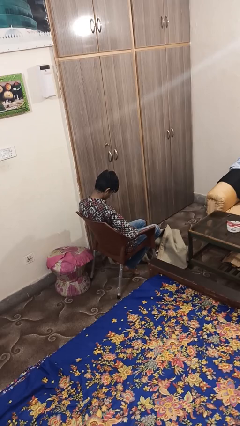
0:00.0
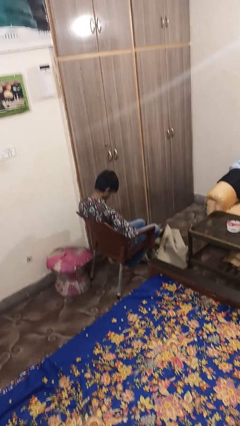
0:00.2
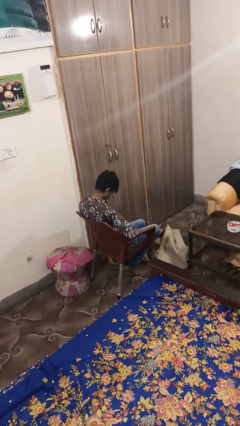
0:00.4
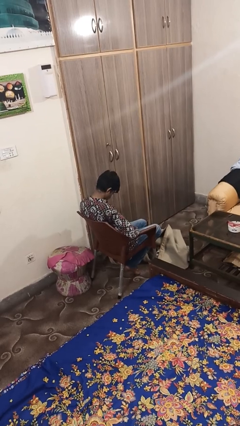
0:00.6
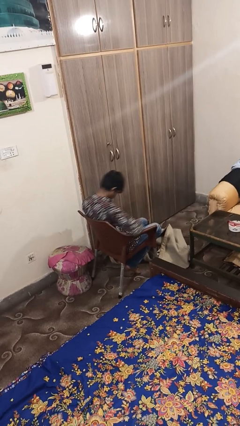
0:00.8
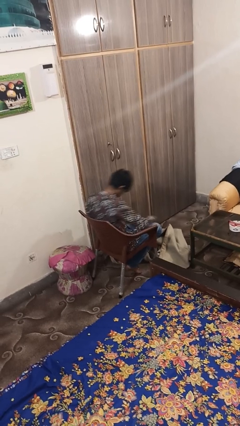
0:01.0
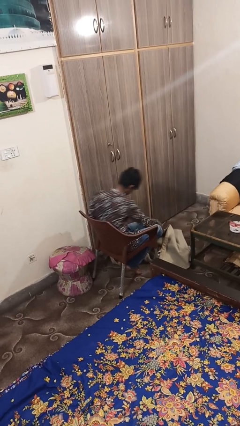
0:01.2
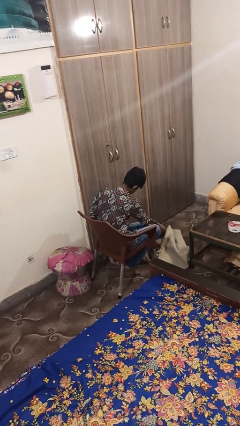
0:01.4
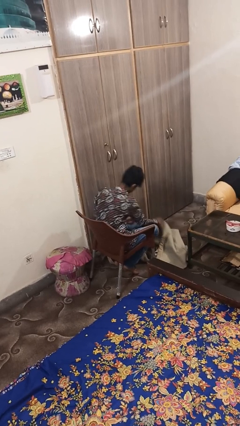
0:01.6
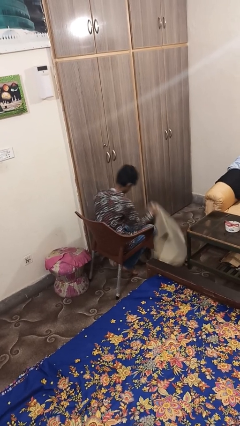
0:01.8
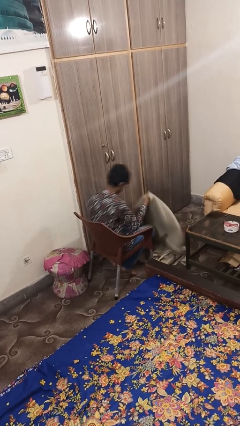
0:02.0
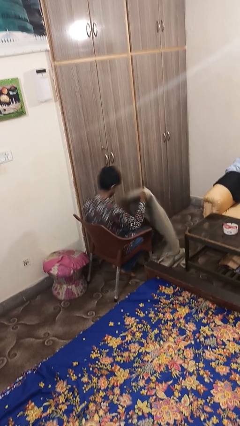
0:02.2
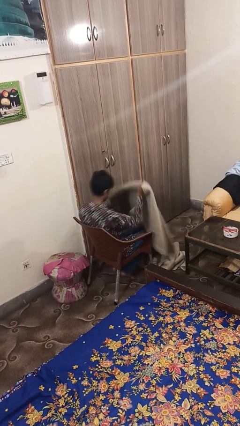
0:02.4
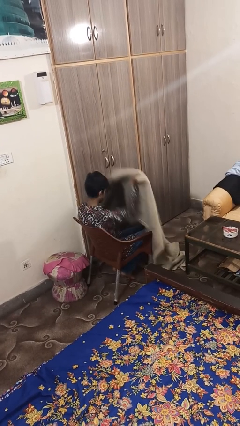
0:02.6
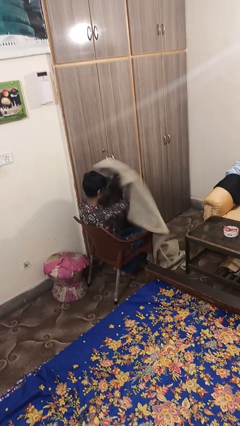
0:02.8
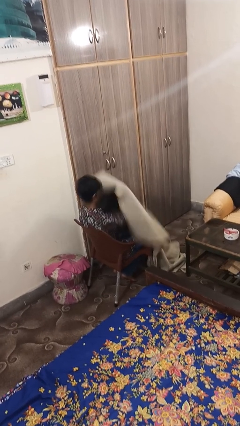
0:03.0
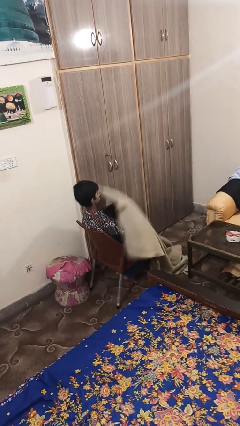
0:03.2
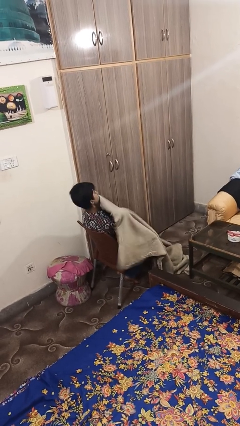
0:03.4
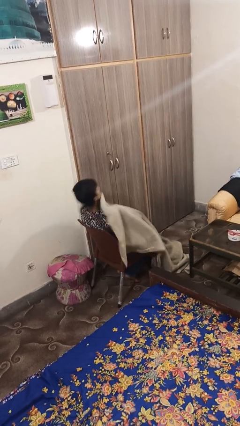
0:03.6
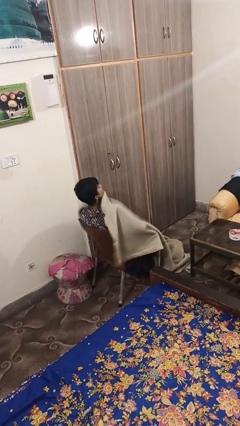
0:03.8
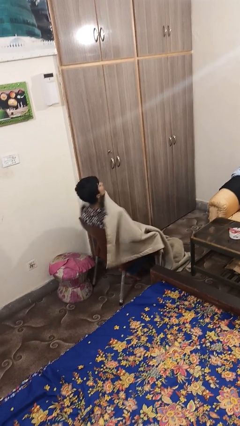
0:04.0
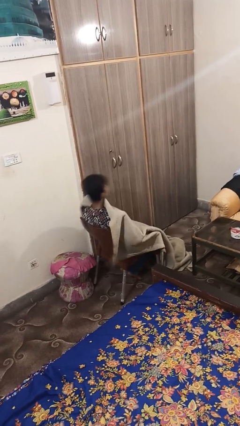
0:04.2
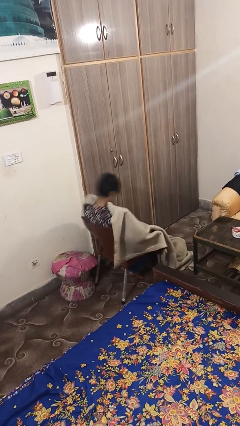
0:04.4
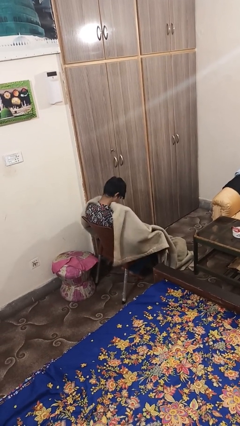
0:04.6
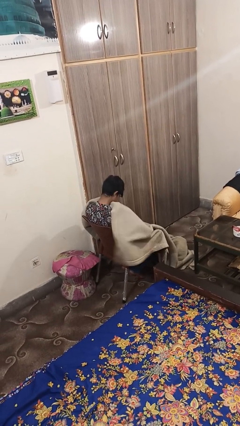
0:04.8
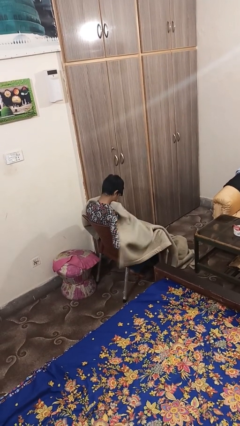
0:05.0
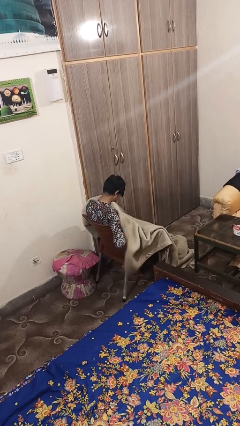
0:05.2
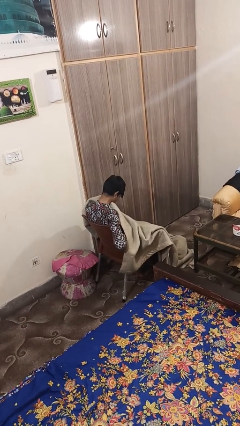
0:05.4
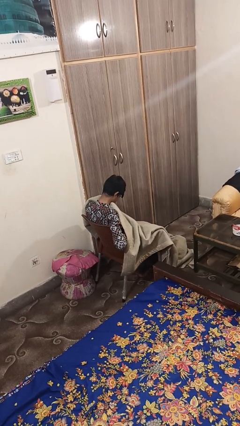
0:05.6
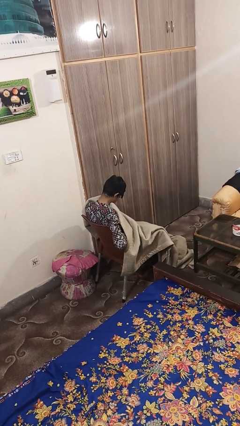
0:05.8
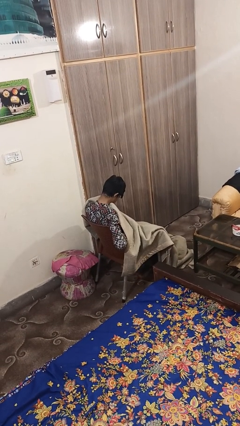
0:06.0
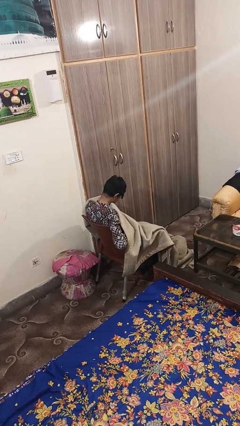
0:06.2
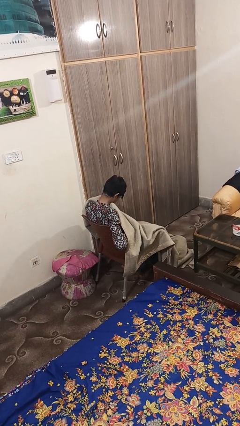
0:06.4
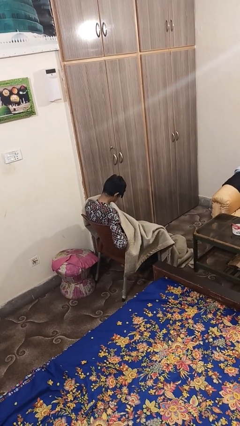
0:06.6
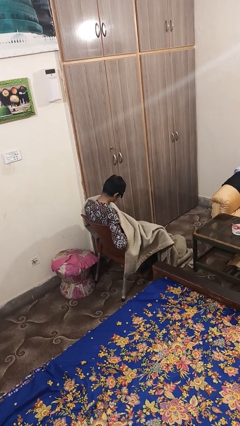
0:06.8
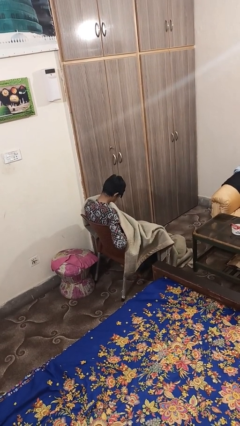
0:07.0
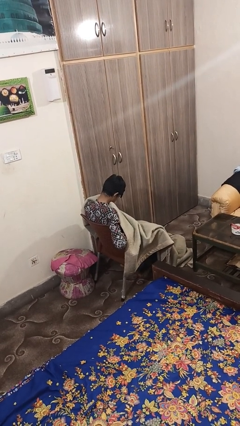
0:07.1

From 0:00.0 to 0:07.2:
person covers with blanket

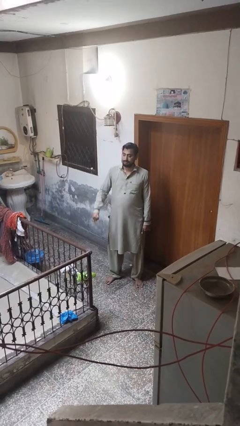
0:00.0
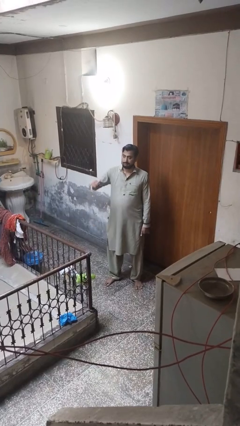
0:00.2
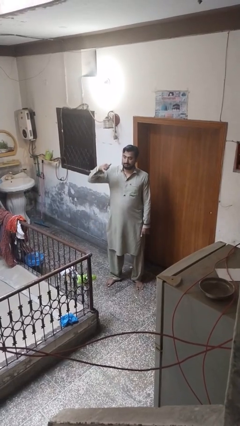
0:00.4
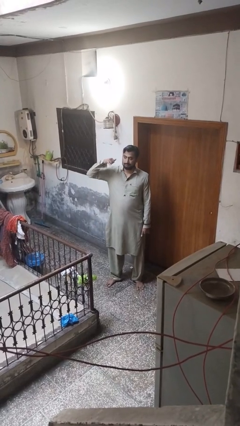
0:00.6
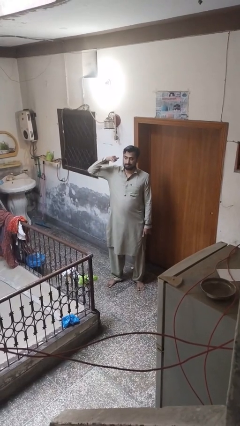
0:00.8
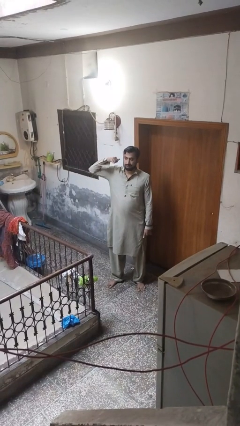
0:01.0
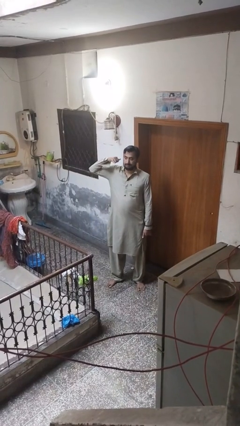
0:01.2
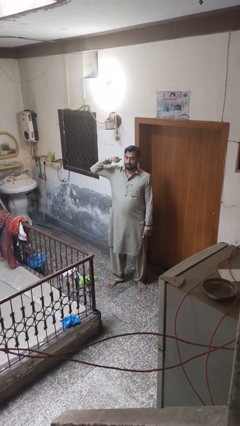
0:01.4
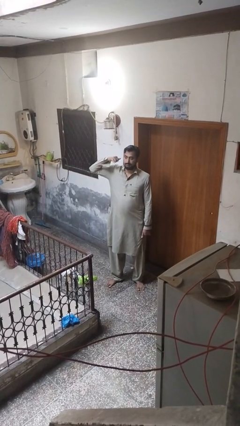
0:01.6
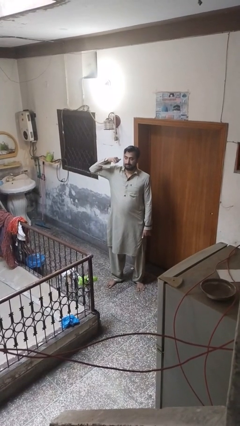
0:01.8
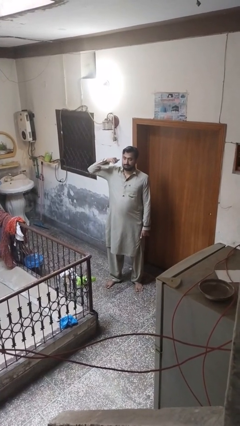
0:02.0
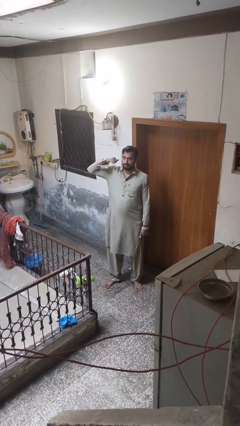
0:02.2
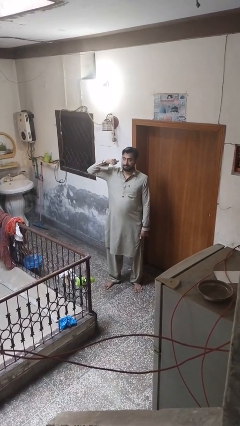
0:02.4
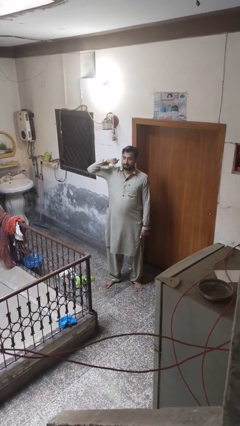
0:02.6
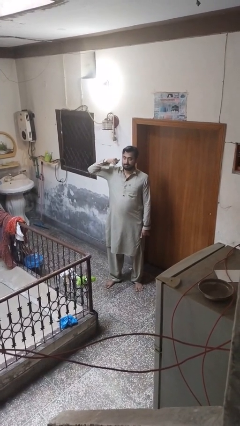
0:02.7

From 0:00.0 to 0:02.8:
person gestures call me

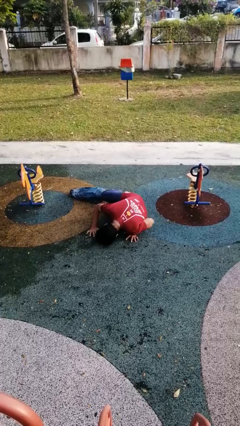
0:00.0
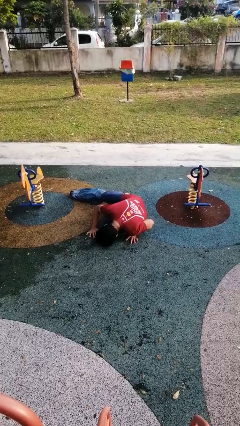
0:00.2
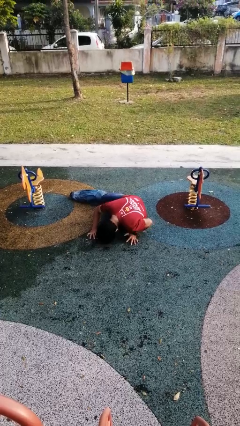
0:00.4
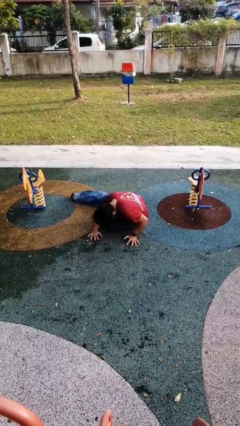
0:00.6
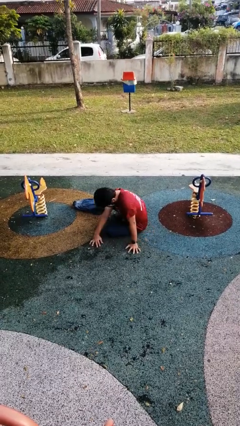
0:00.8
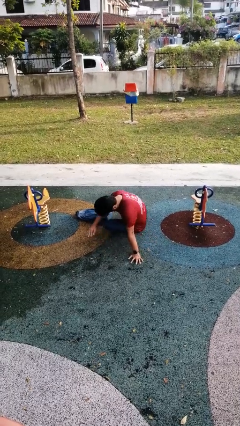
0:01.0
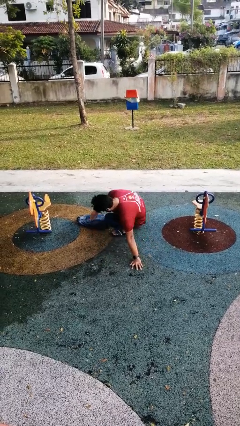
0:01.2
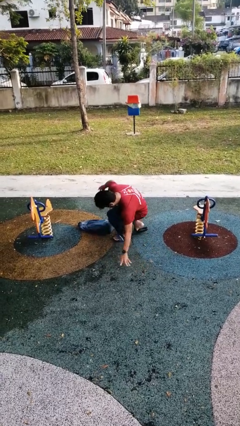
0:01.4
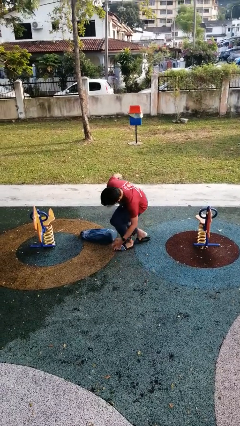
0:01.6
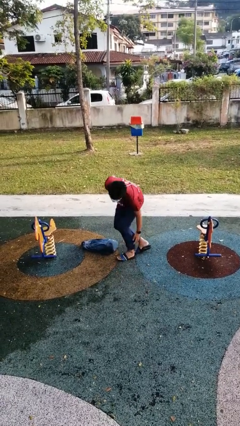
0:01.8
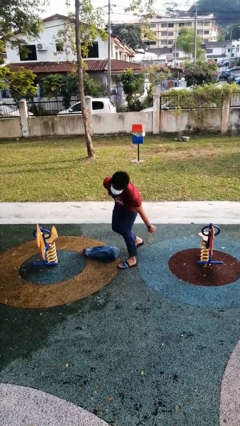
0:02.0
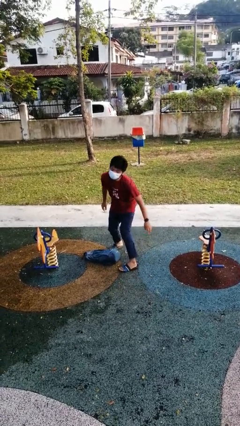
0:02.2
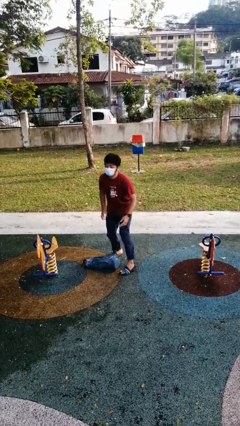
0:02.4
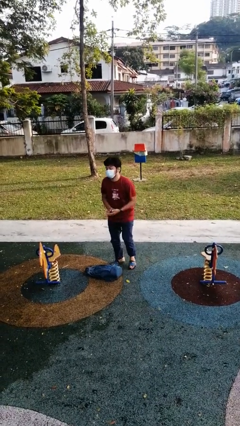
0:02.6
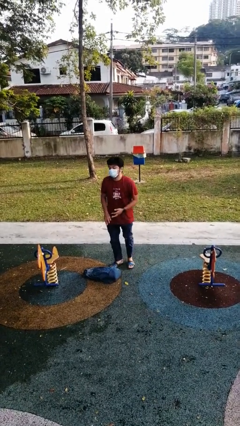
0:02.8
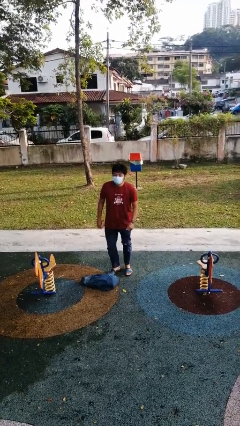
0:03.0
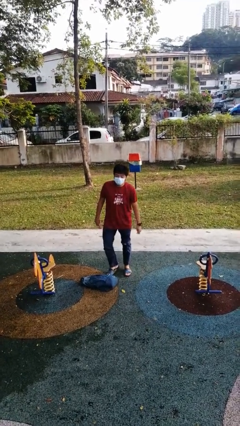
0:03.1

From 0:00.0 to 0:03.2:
person stands up from floor

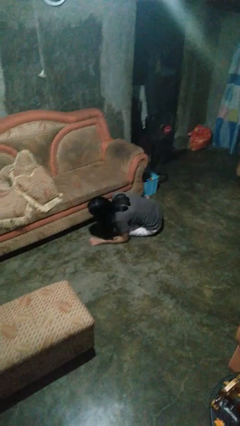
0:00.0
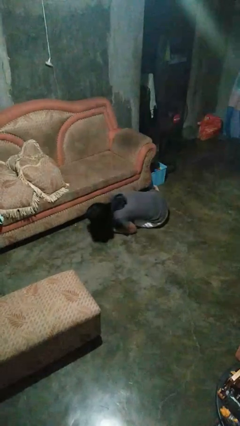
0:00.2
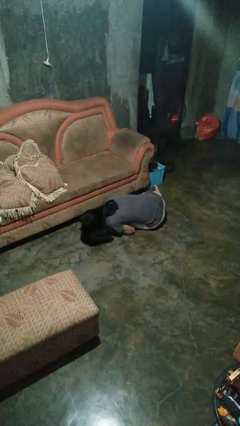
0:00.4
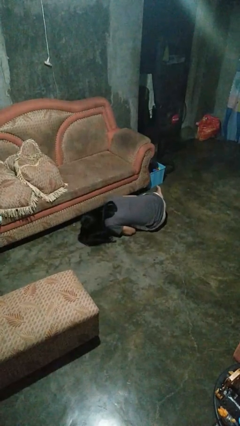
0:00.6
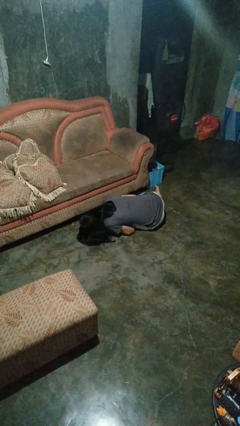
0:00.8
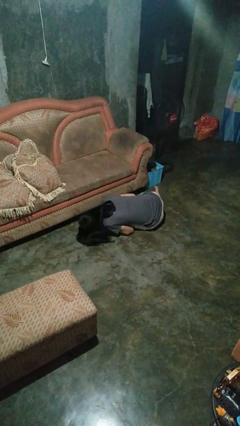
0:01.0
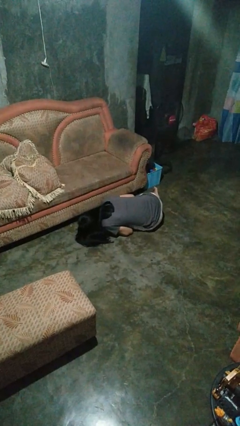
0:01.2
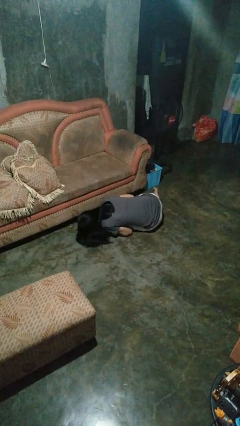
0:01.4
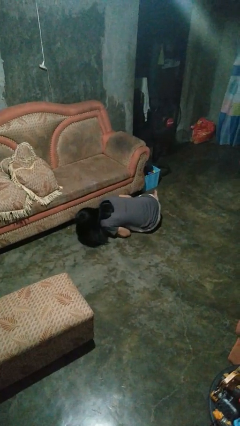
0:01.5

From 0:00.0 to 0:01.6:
person searches under couch

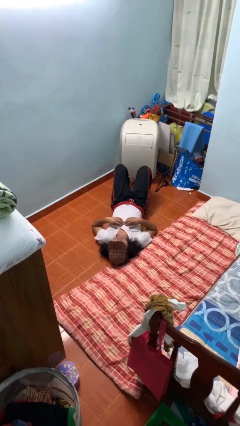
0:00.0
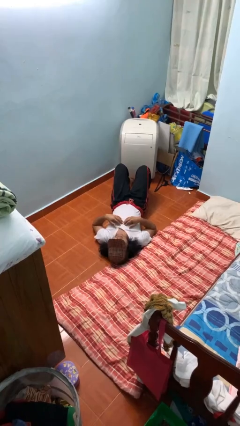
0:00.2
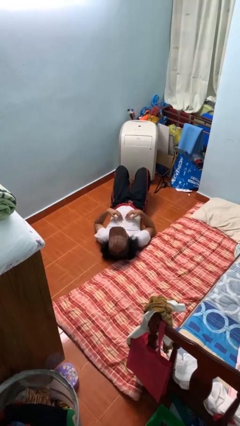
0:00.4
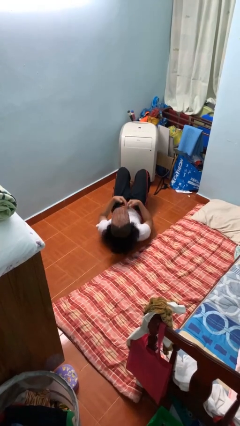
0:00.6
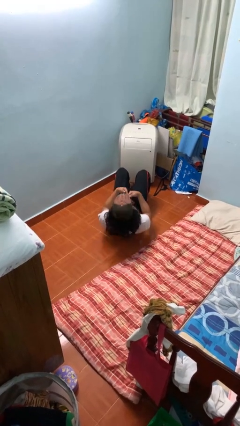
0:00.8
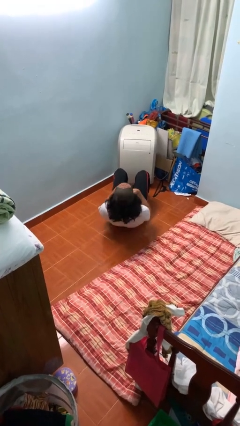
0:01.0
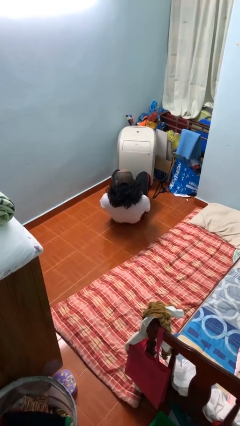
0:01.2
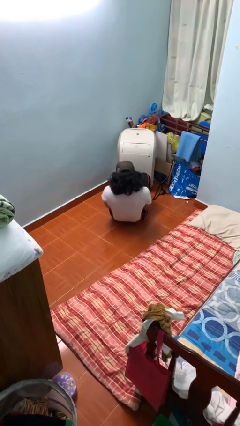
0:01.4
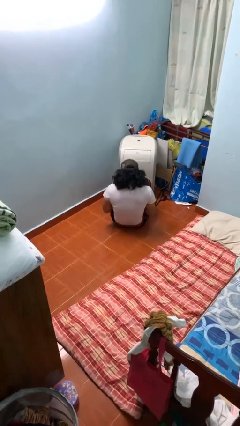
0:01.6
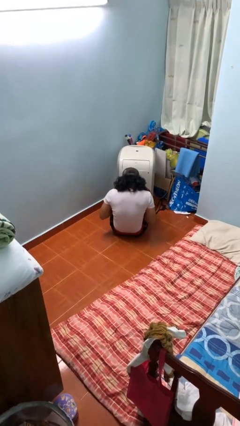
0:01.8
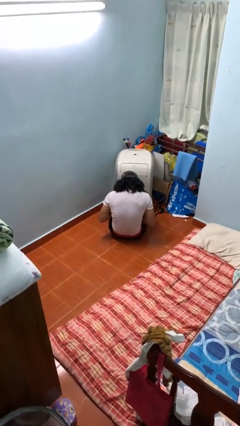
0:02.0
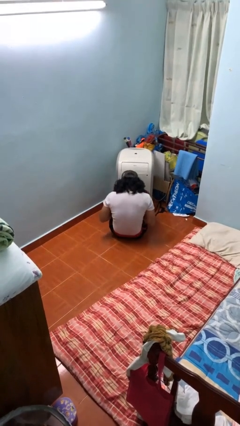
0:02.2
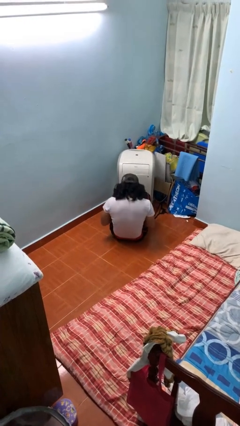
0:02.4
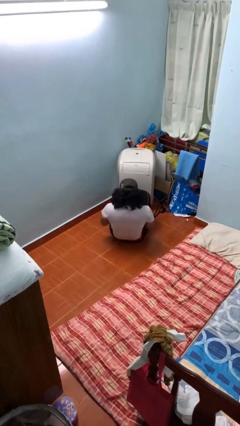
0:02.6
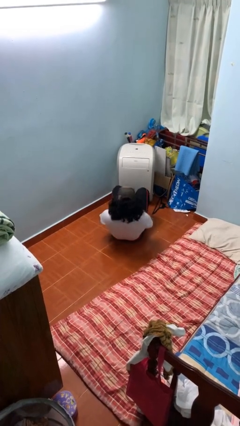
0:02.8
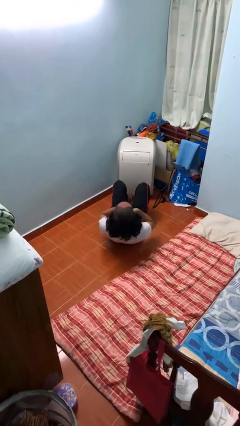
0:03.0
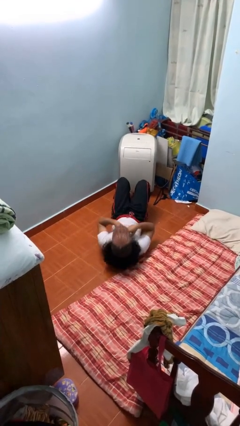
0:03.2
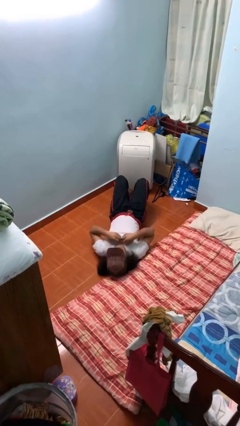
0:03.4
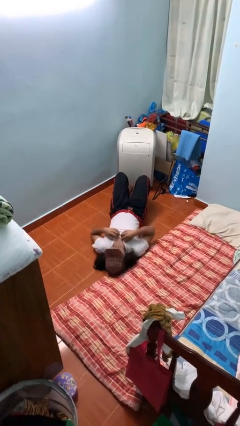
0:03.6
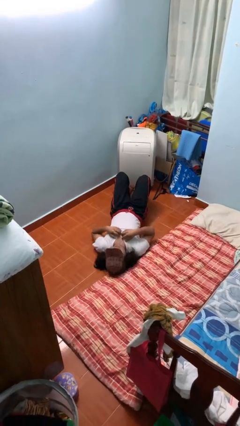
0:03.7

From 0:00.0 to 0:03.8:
person exercises with situp
